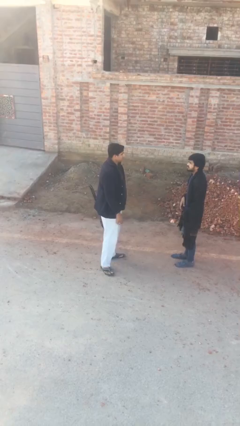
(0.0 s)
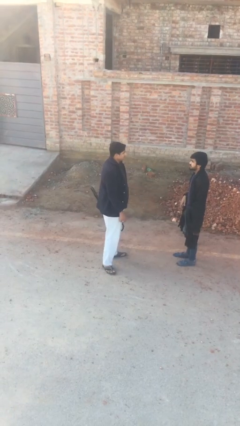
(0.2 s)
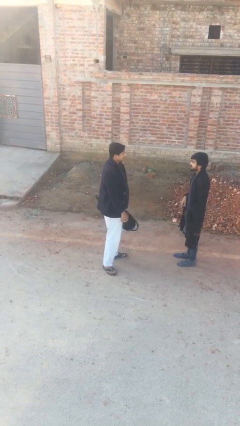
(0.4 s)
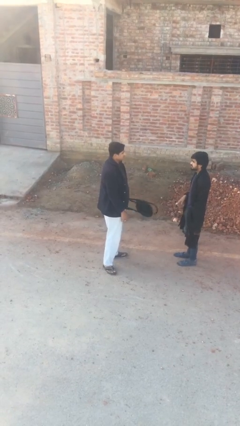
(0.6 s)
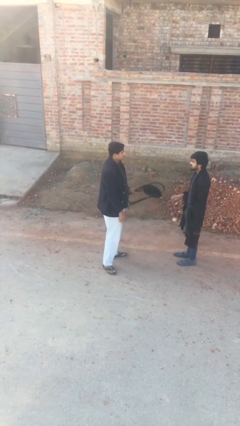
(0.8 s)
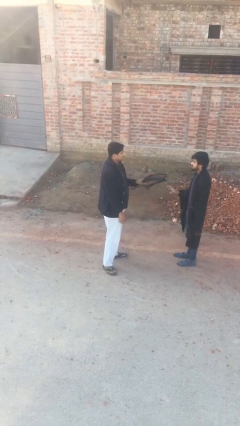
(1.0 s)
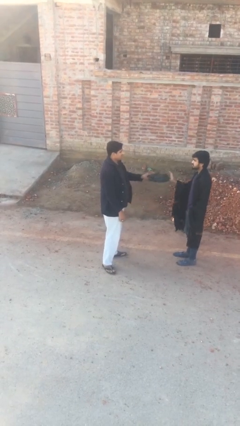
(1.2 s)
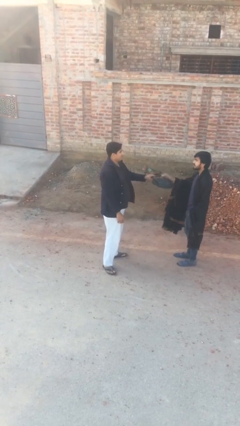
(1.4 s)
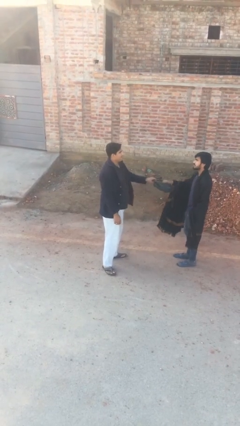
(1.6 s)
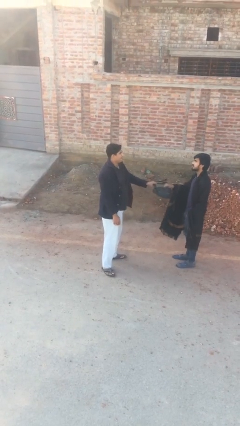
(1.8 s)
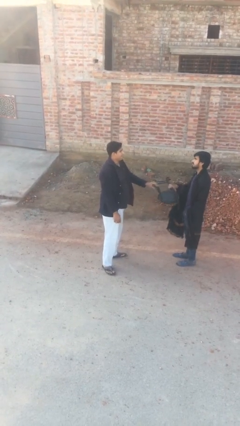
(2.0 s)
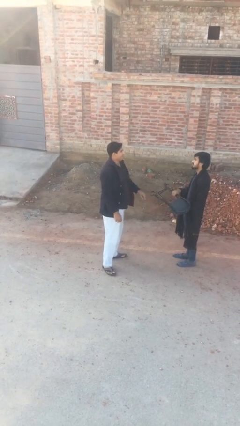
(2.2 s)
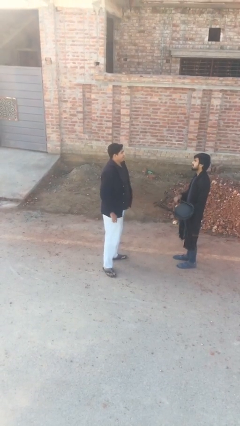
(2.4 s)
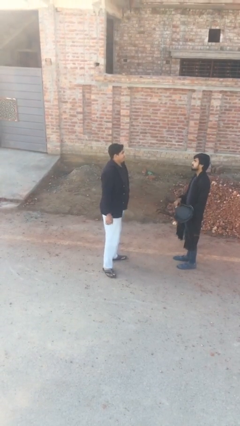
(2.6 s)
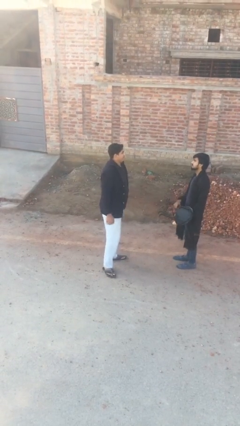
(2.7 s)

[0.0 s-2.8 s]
person transfers object to person

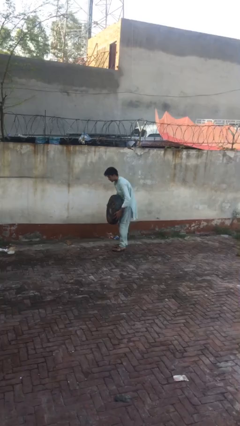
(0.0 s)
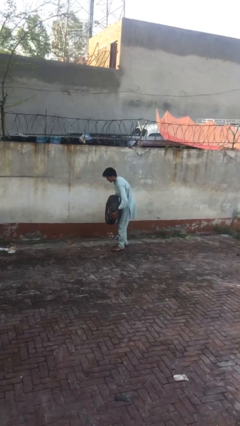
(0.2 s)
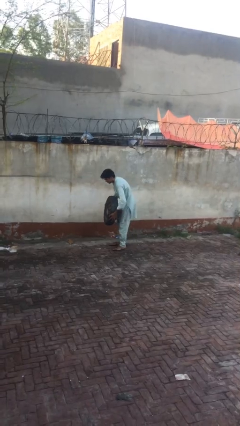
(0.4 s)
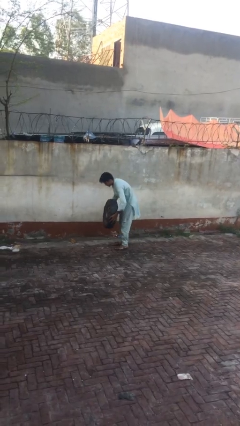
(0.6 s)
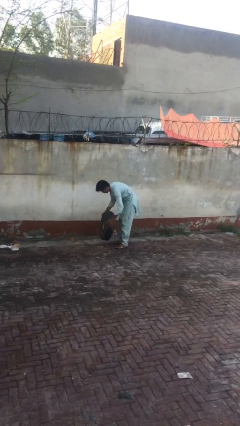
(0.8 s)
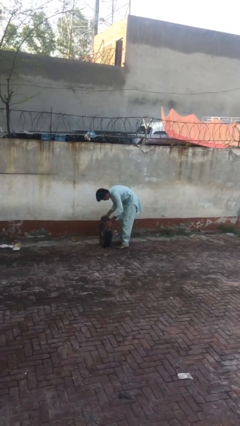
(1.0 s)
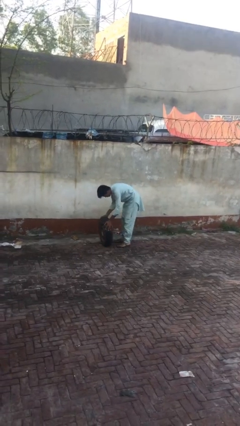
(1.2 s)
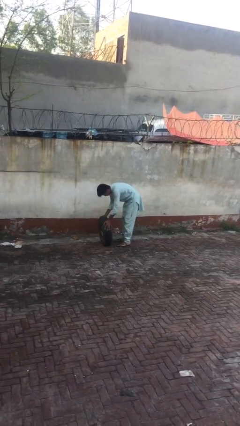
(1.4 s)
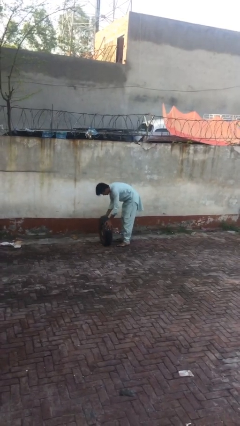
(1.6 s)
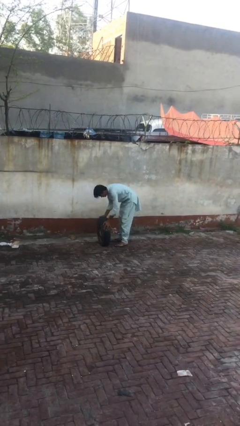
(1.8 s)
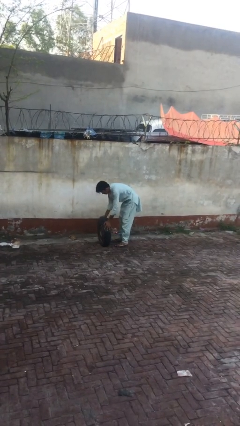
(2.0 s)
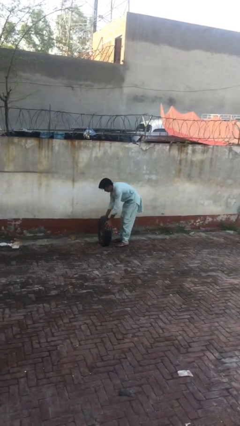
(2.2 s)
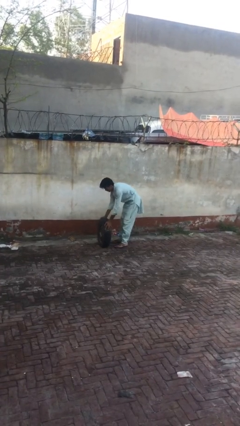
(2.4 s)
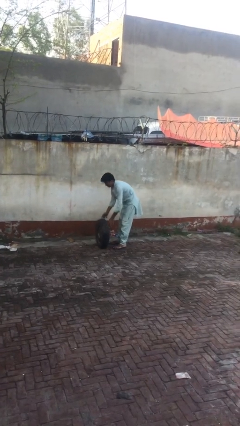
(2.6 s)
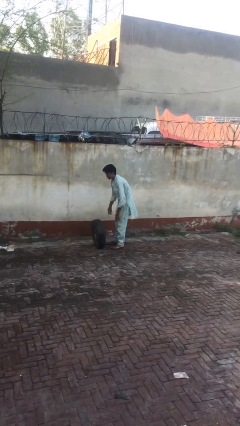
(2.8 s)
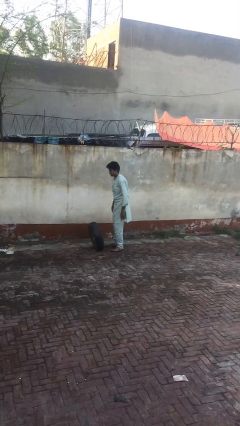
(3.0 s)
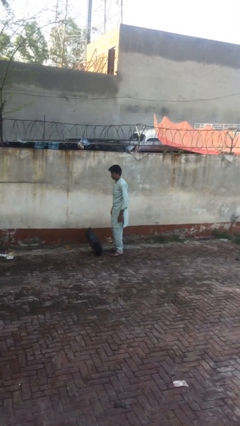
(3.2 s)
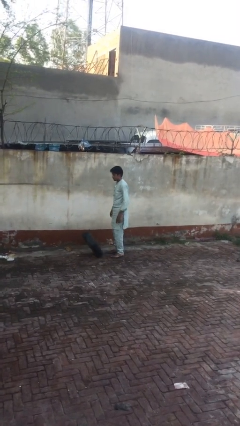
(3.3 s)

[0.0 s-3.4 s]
person puts down object on floor

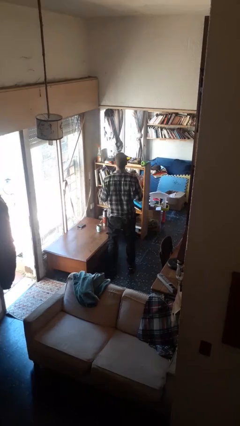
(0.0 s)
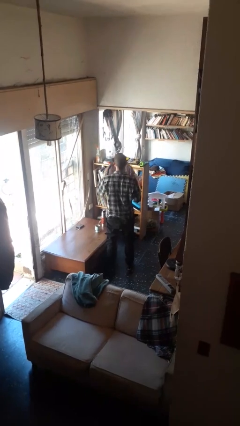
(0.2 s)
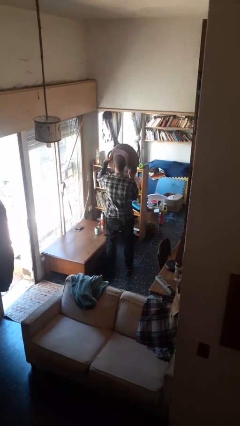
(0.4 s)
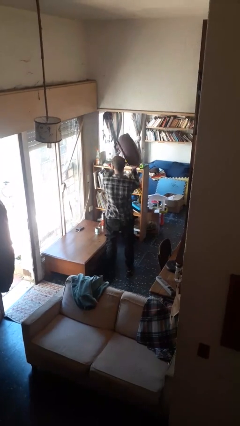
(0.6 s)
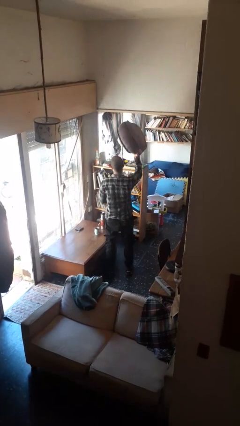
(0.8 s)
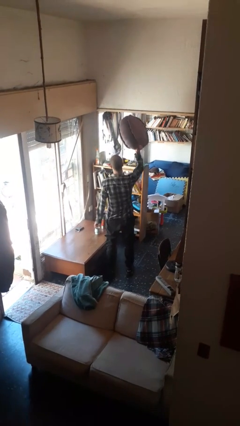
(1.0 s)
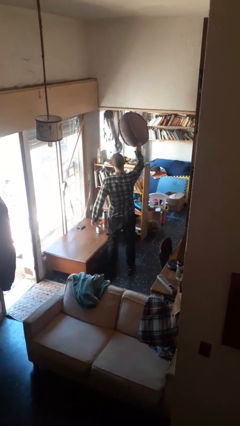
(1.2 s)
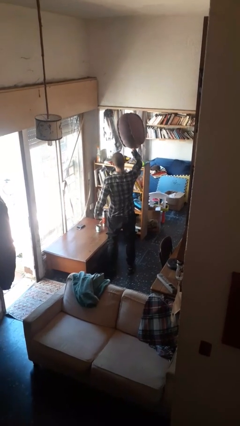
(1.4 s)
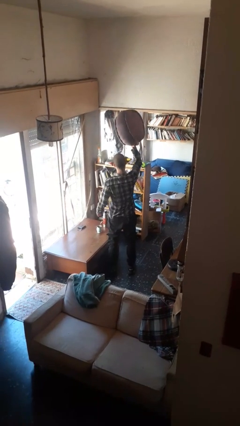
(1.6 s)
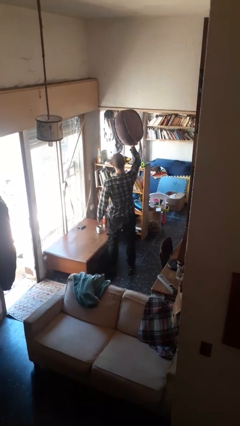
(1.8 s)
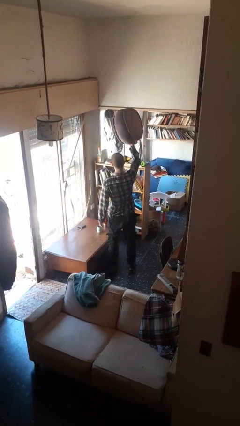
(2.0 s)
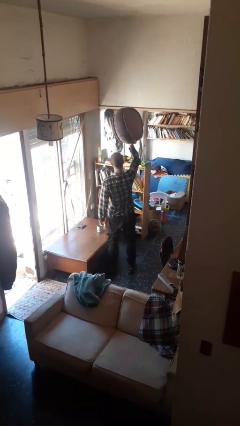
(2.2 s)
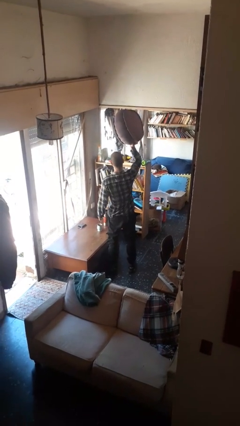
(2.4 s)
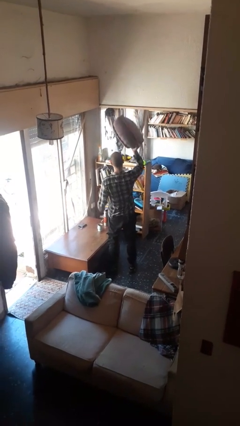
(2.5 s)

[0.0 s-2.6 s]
person holds object above head

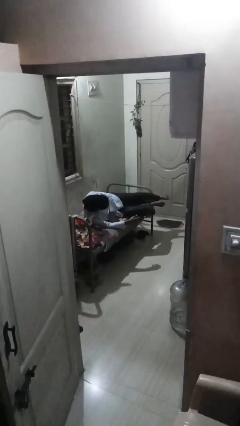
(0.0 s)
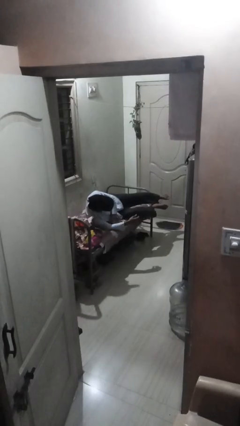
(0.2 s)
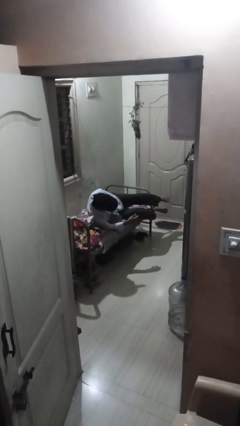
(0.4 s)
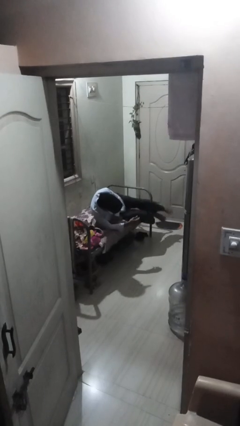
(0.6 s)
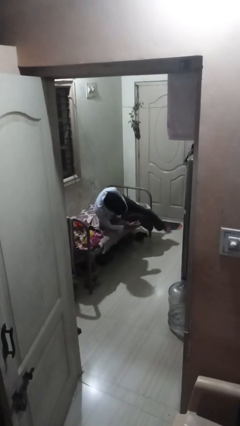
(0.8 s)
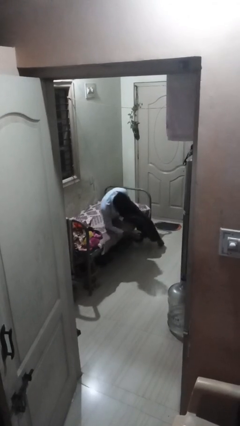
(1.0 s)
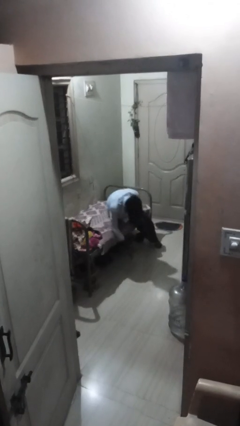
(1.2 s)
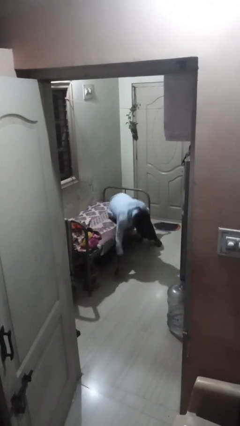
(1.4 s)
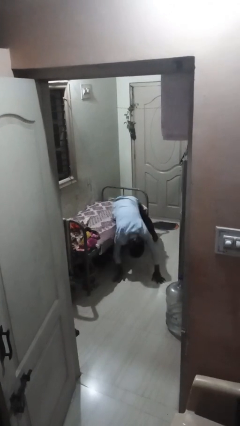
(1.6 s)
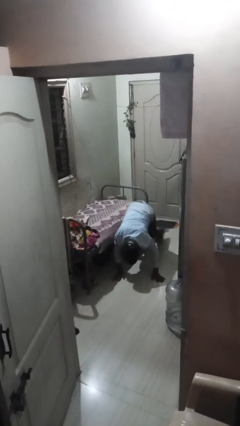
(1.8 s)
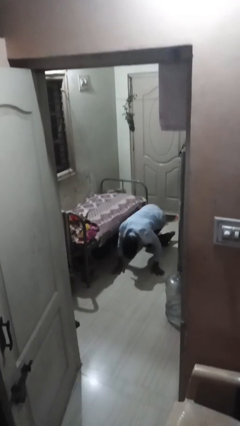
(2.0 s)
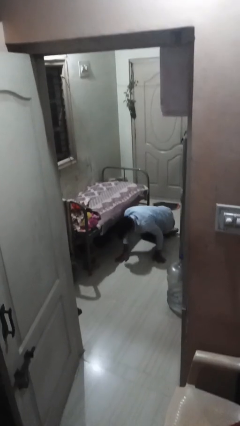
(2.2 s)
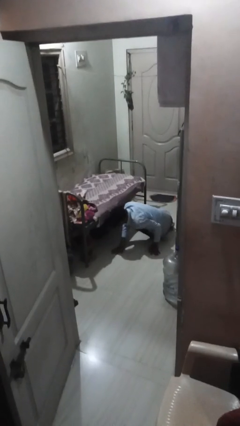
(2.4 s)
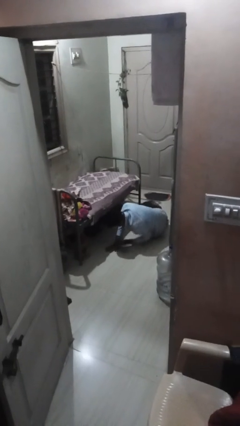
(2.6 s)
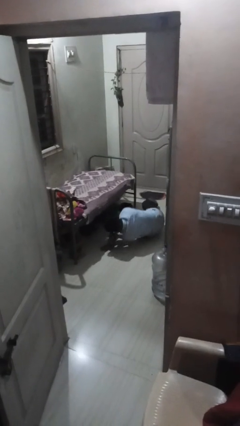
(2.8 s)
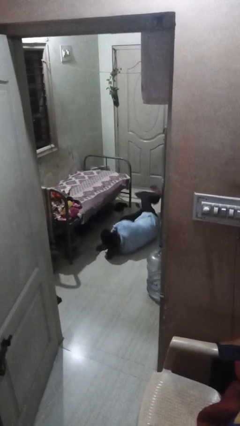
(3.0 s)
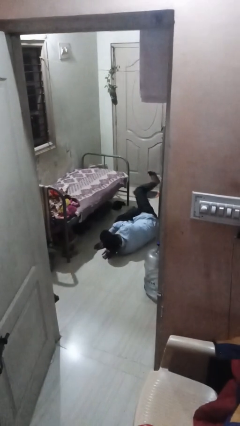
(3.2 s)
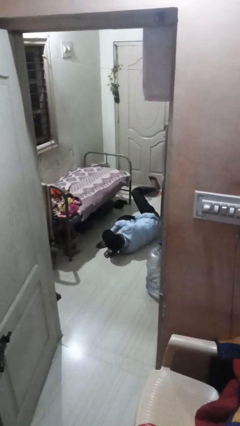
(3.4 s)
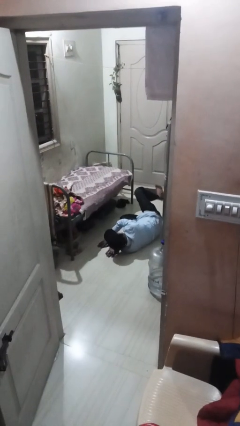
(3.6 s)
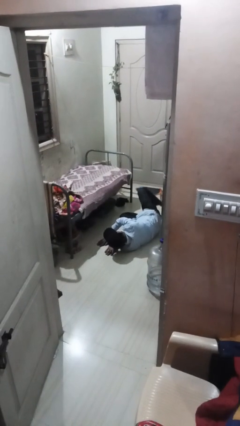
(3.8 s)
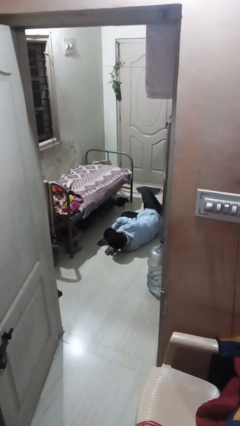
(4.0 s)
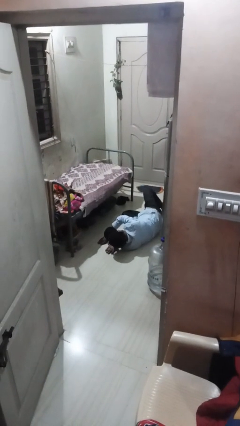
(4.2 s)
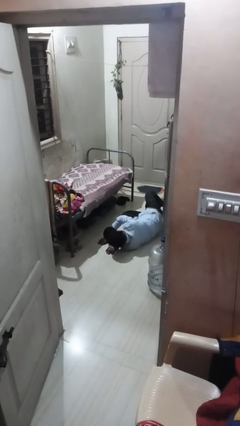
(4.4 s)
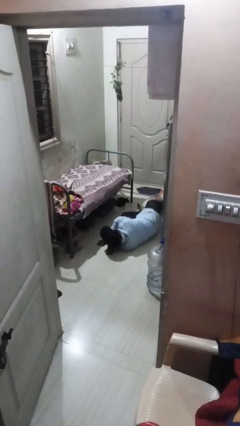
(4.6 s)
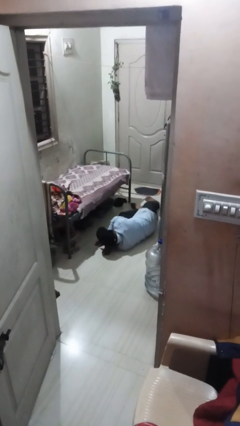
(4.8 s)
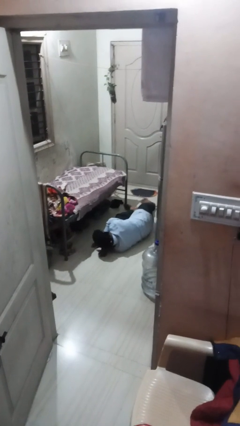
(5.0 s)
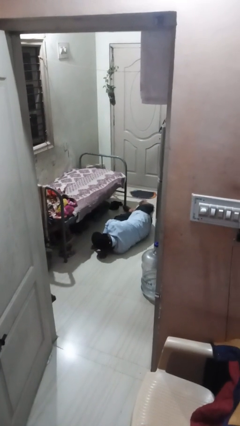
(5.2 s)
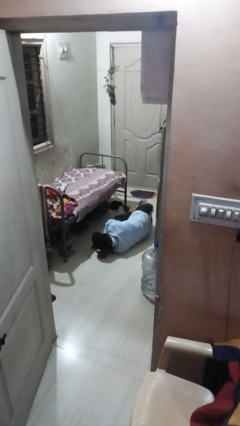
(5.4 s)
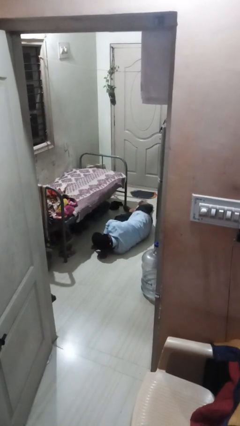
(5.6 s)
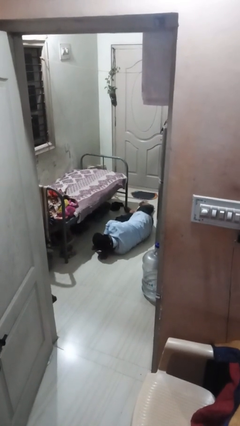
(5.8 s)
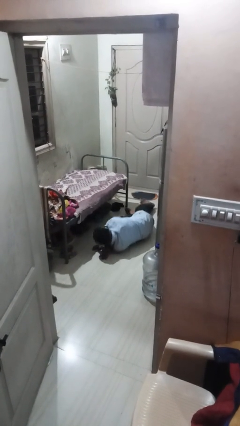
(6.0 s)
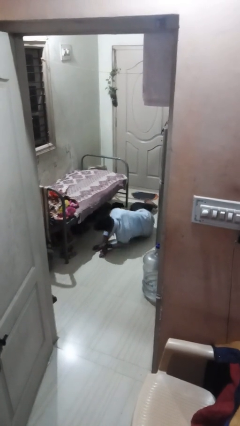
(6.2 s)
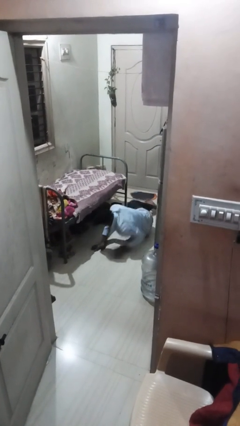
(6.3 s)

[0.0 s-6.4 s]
person falls from bed

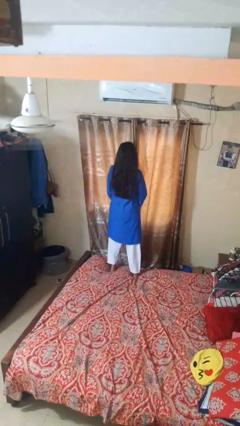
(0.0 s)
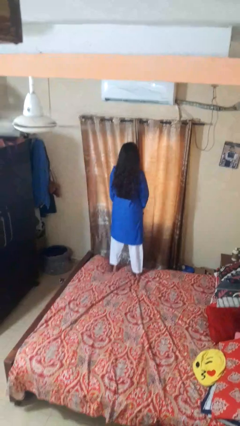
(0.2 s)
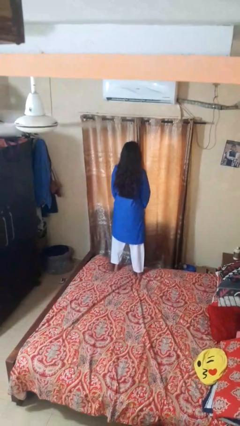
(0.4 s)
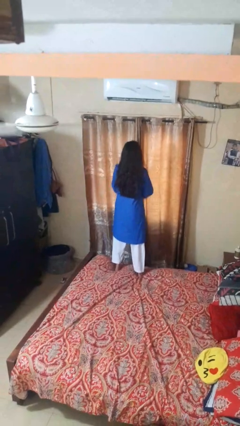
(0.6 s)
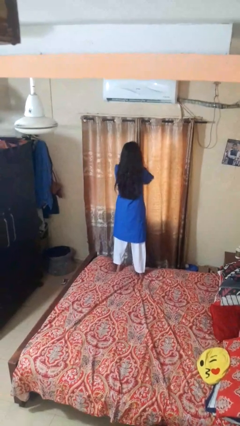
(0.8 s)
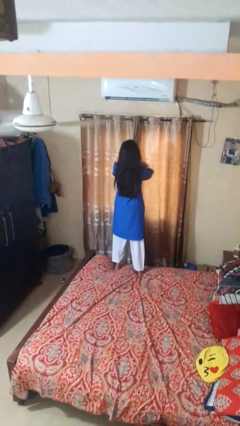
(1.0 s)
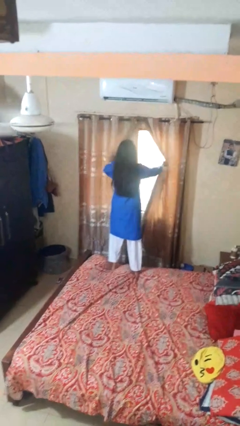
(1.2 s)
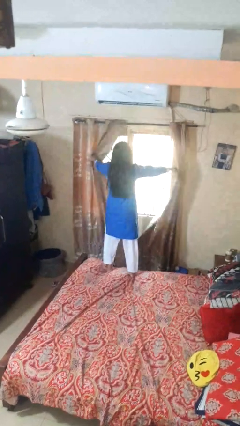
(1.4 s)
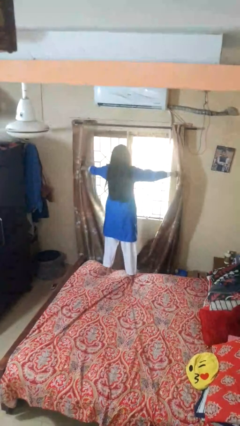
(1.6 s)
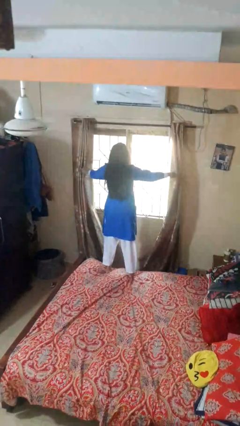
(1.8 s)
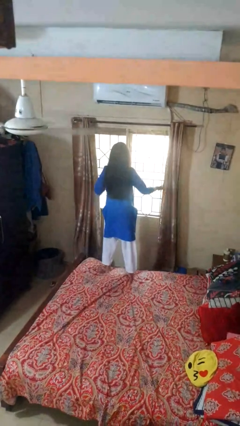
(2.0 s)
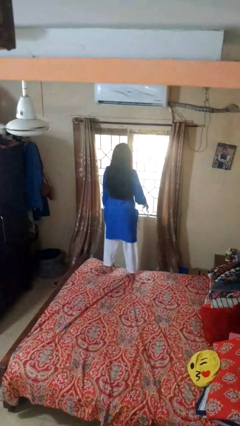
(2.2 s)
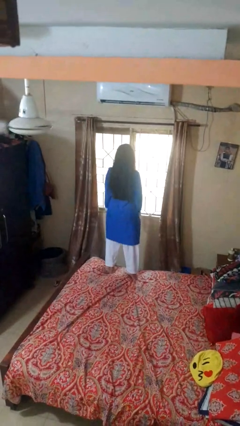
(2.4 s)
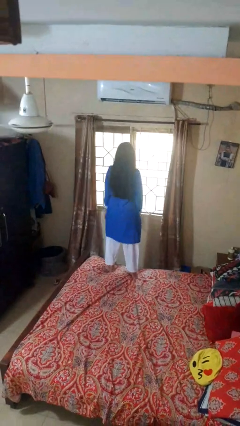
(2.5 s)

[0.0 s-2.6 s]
person opens curtains
